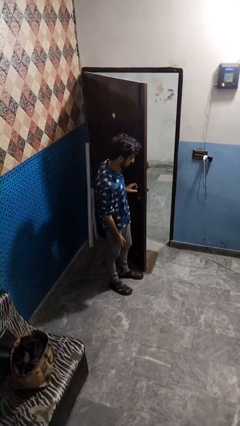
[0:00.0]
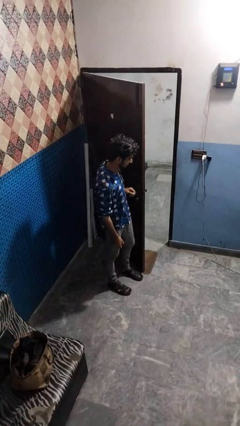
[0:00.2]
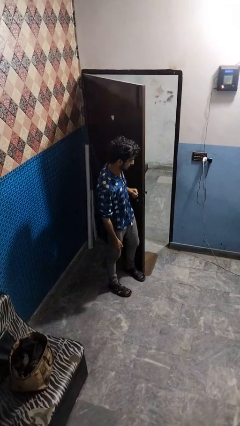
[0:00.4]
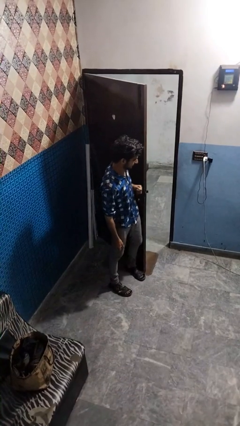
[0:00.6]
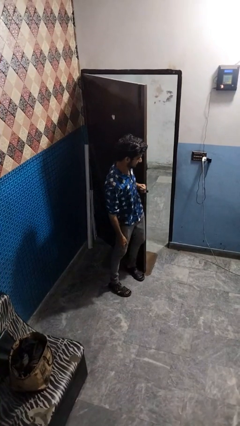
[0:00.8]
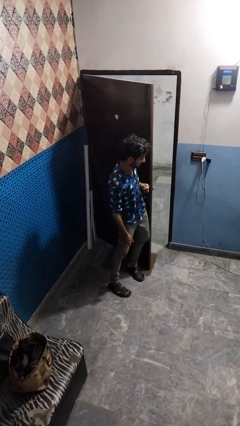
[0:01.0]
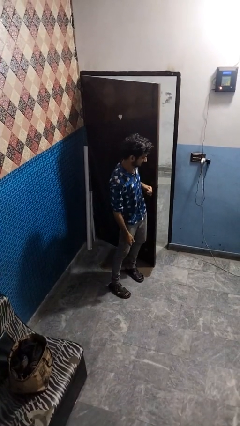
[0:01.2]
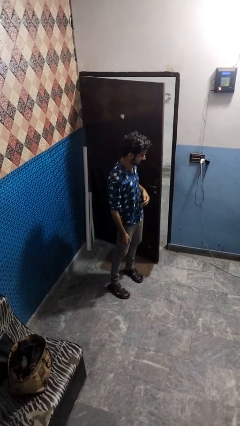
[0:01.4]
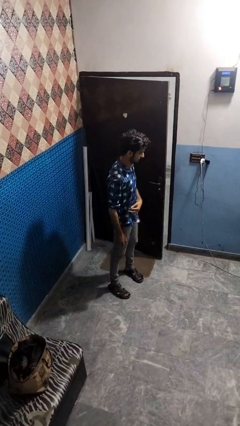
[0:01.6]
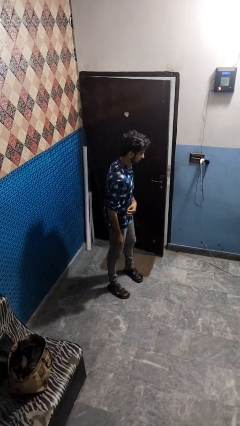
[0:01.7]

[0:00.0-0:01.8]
person closes door with hip

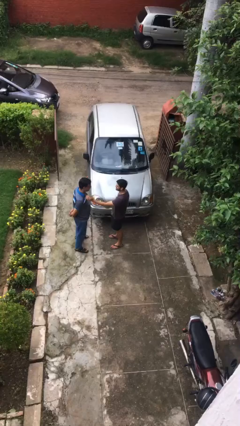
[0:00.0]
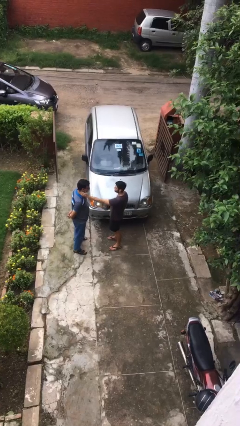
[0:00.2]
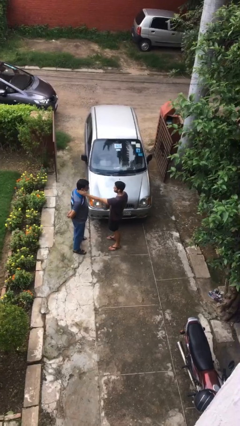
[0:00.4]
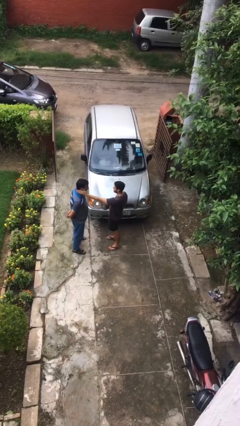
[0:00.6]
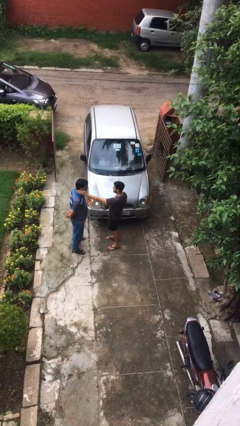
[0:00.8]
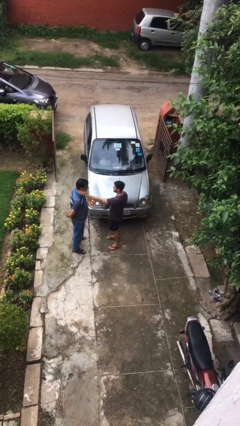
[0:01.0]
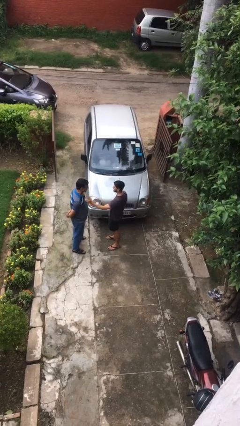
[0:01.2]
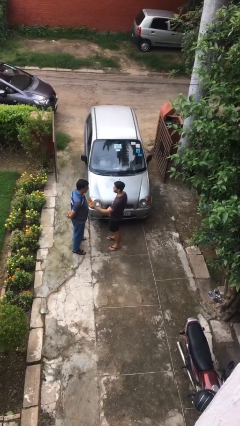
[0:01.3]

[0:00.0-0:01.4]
person touches face of person

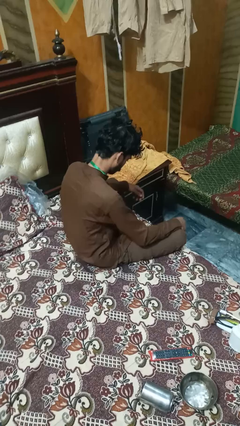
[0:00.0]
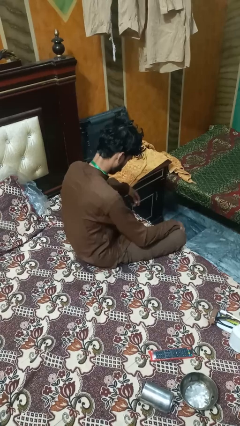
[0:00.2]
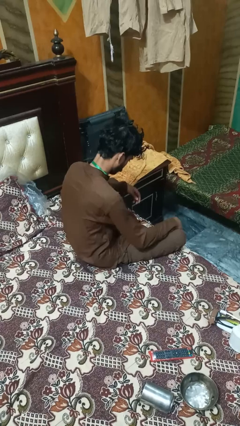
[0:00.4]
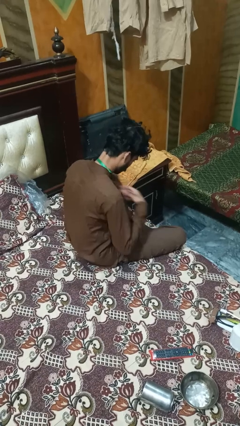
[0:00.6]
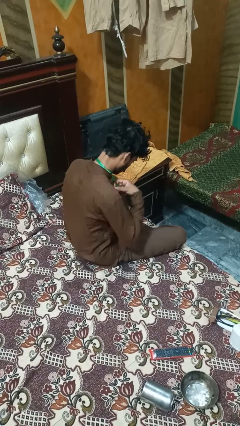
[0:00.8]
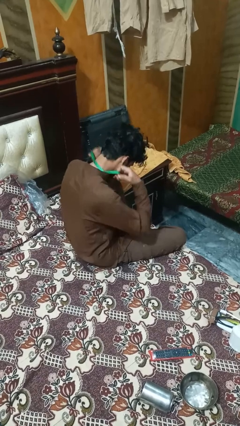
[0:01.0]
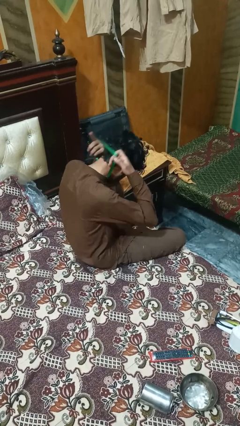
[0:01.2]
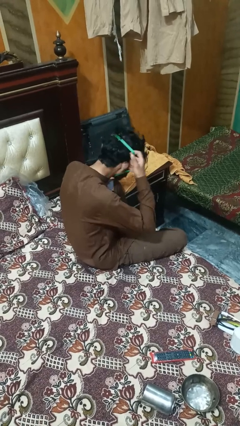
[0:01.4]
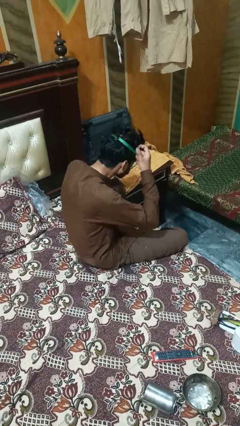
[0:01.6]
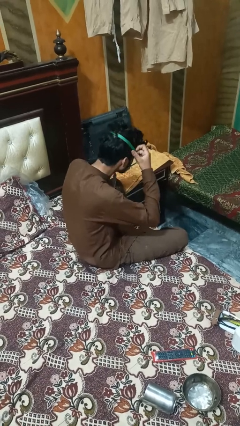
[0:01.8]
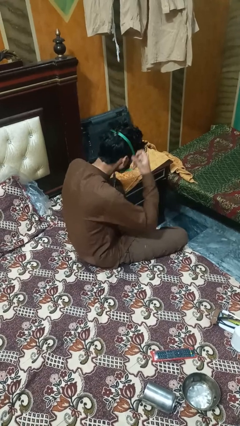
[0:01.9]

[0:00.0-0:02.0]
person takes off necklace

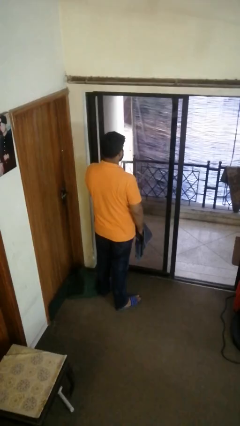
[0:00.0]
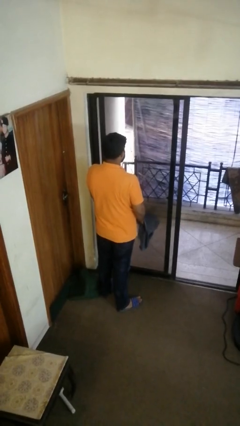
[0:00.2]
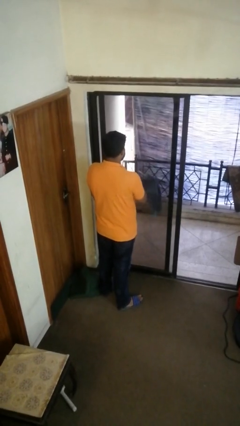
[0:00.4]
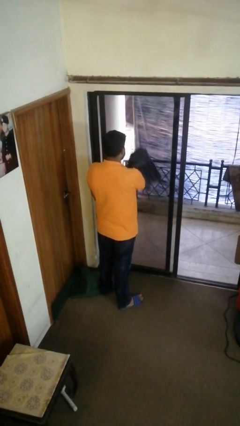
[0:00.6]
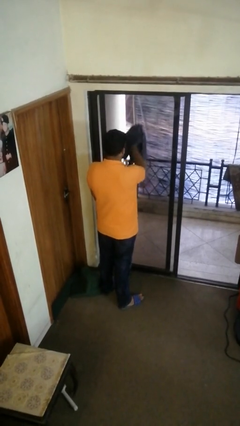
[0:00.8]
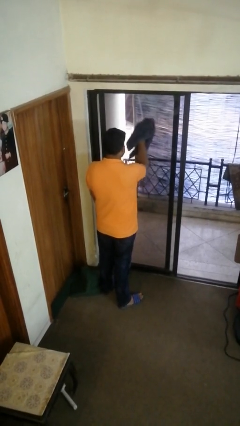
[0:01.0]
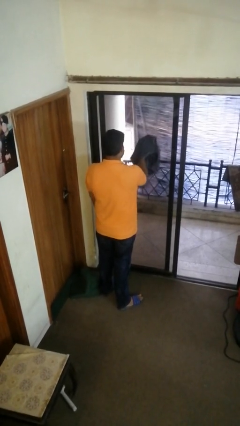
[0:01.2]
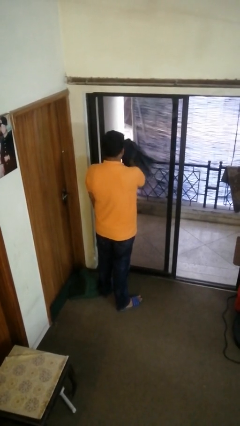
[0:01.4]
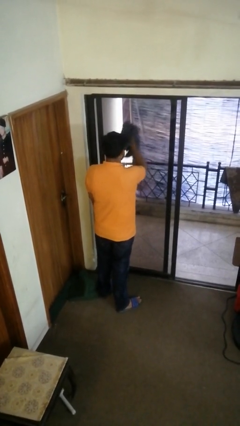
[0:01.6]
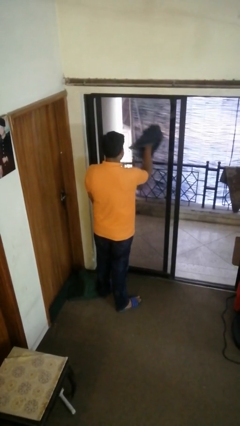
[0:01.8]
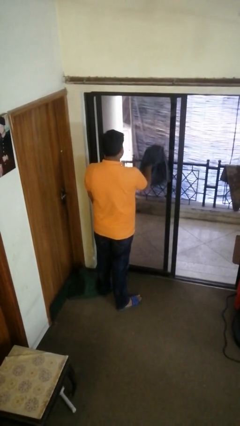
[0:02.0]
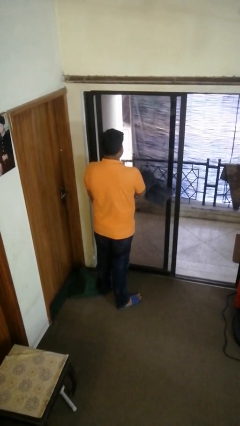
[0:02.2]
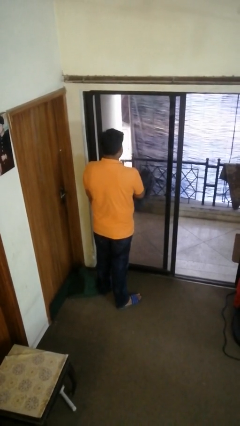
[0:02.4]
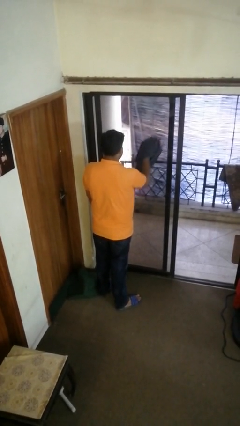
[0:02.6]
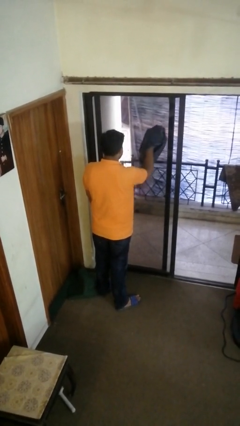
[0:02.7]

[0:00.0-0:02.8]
person washes window

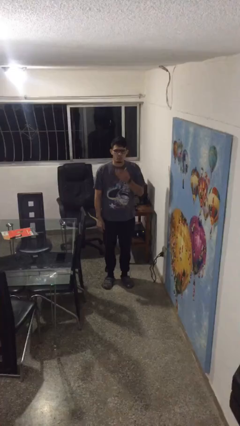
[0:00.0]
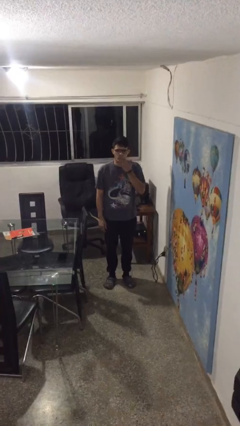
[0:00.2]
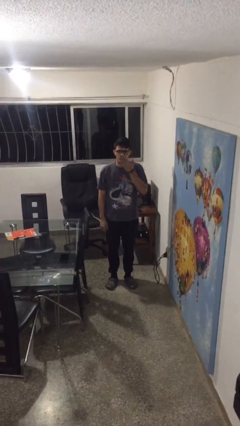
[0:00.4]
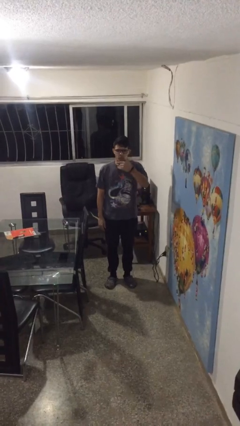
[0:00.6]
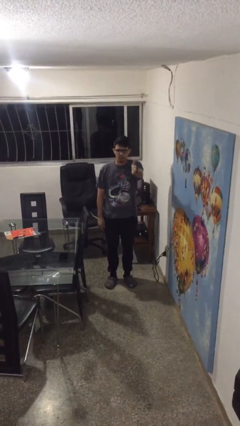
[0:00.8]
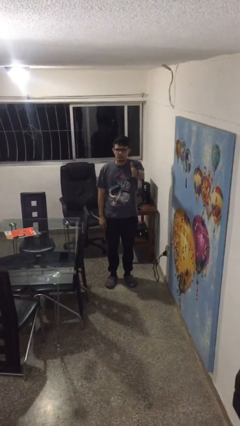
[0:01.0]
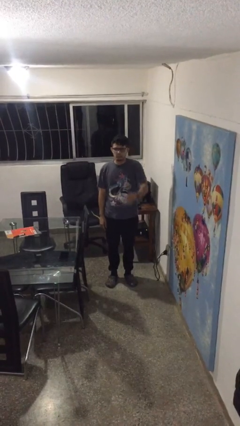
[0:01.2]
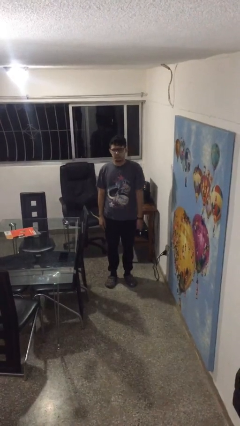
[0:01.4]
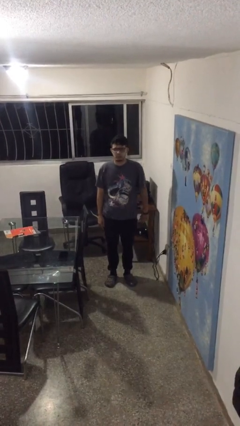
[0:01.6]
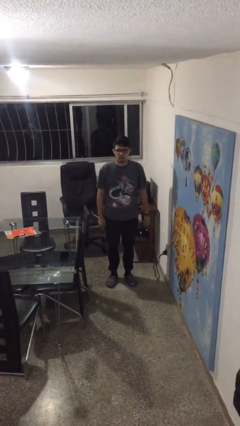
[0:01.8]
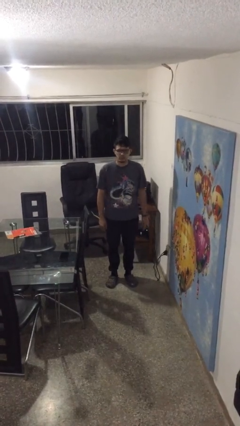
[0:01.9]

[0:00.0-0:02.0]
person gestures blow kiss

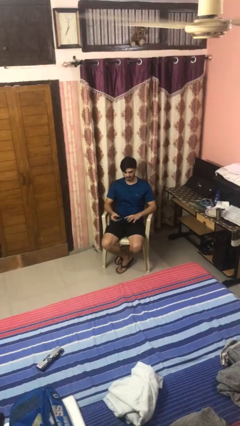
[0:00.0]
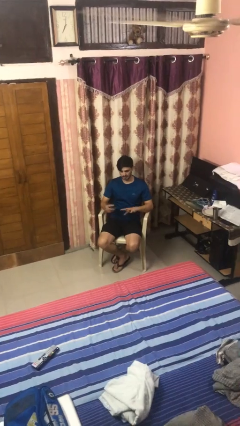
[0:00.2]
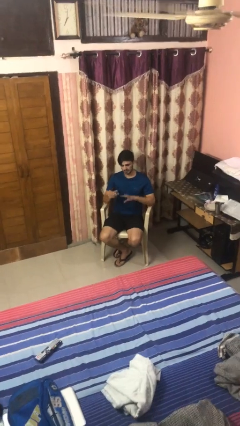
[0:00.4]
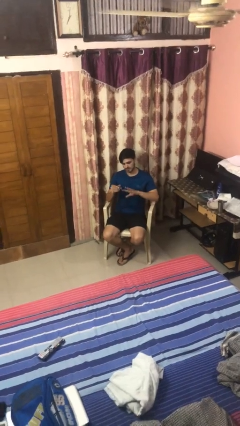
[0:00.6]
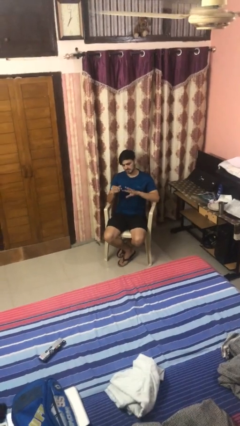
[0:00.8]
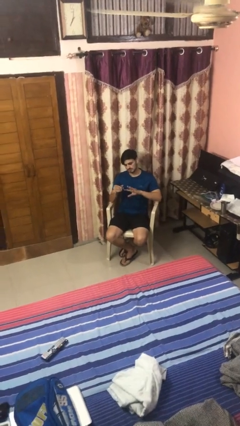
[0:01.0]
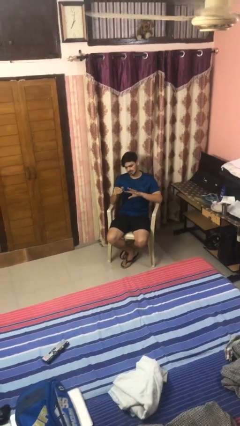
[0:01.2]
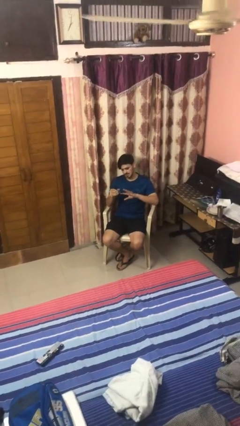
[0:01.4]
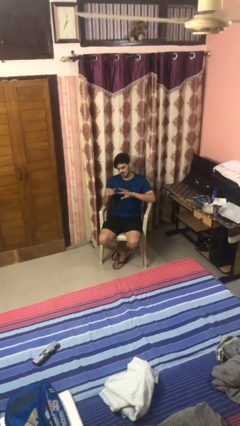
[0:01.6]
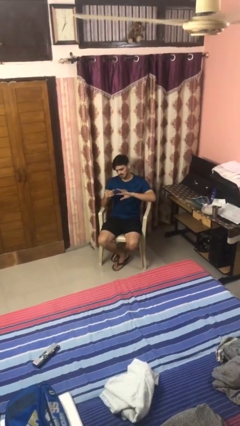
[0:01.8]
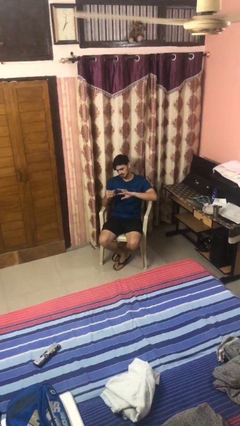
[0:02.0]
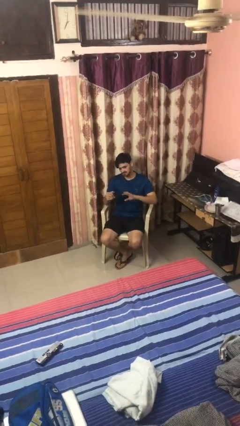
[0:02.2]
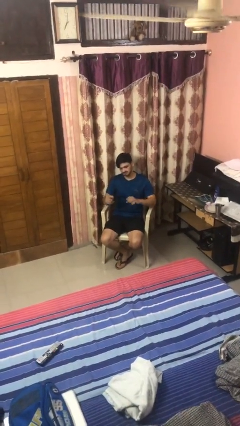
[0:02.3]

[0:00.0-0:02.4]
person clips fingernails

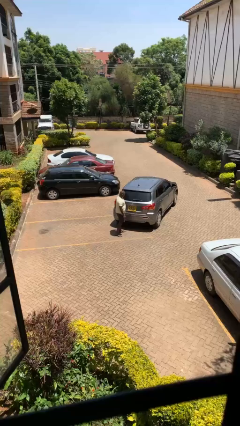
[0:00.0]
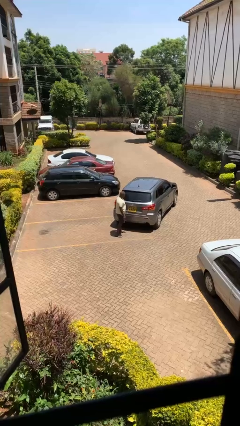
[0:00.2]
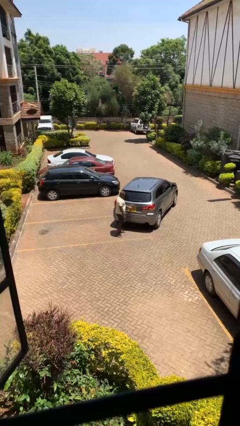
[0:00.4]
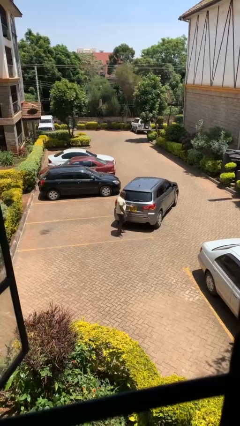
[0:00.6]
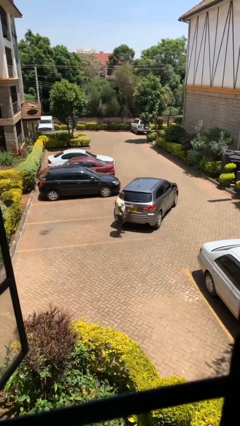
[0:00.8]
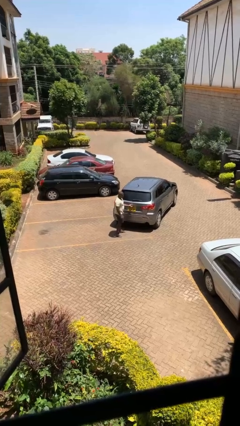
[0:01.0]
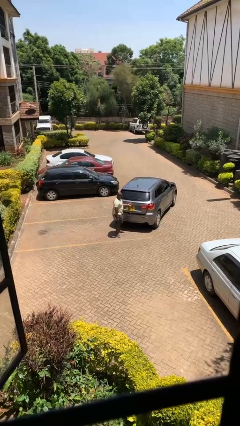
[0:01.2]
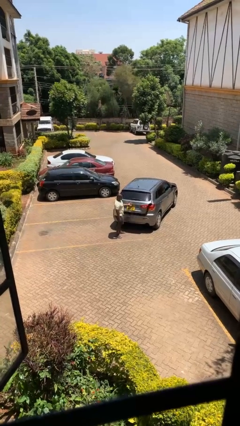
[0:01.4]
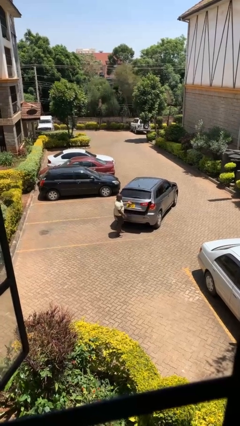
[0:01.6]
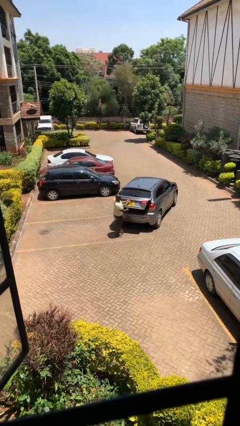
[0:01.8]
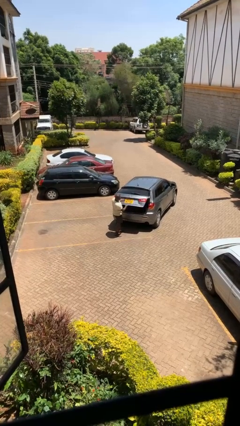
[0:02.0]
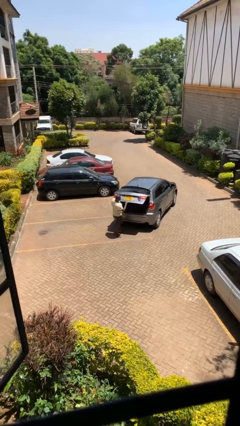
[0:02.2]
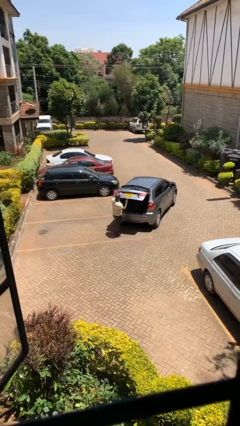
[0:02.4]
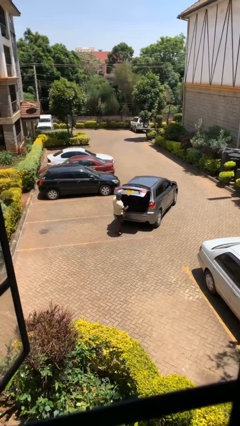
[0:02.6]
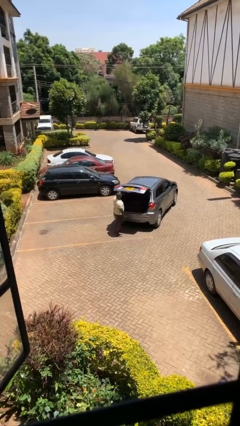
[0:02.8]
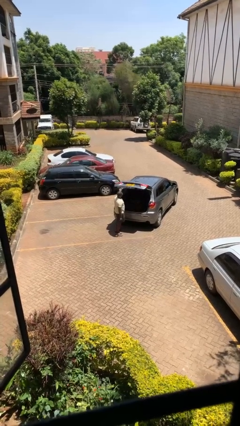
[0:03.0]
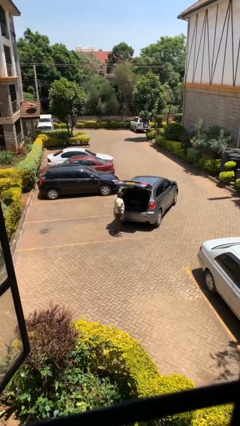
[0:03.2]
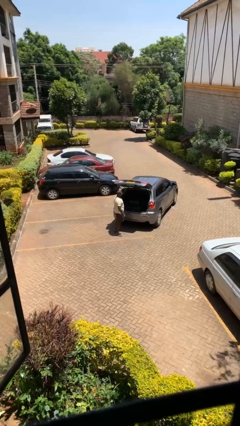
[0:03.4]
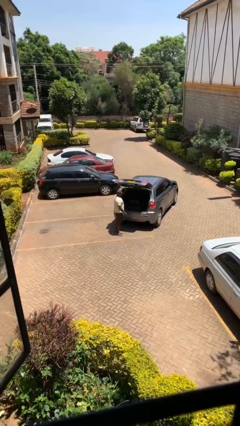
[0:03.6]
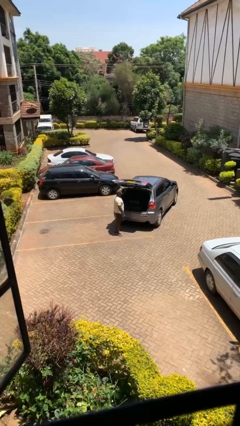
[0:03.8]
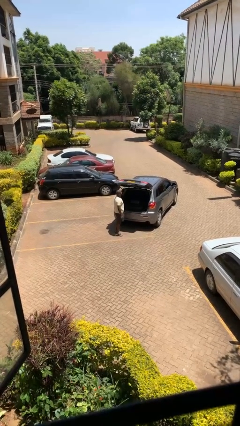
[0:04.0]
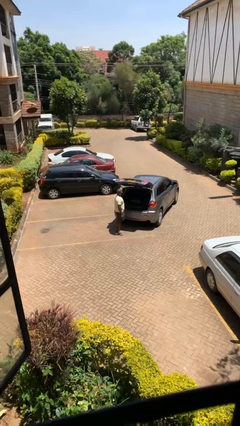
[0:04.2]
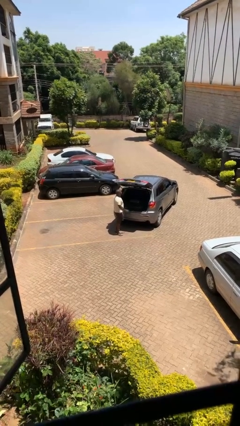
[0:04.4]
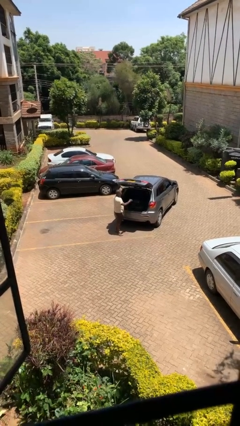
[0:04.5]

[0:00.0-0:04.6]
person opens car trunk

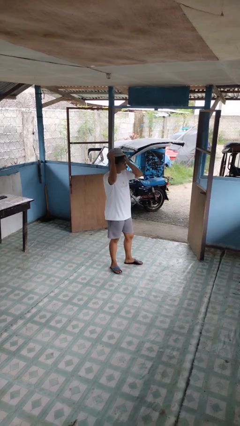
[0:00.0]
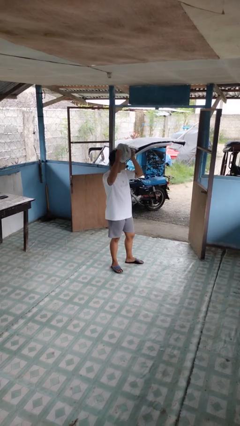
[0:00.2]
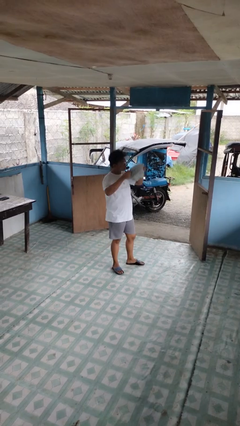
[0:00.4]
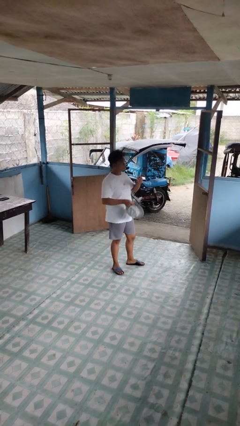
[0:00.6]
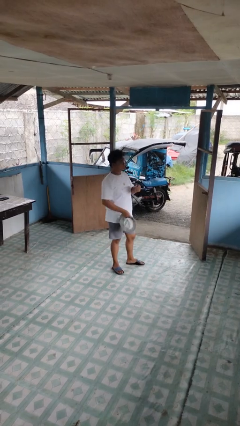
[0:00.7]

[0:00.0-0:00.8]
person takes off hat
